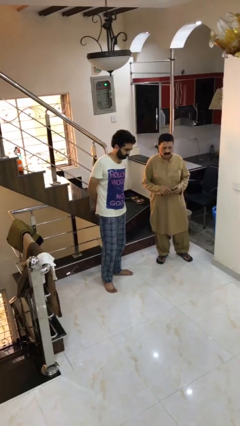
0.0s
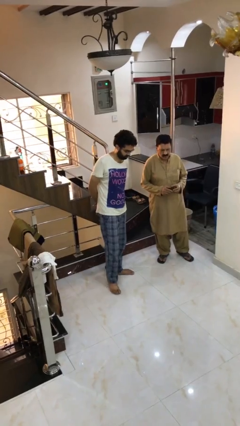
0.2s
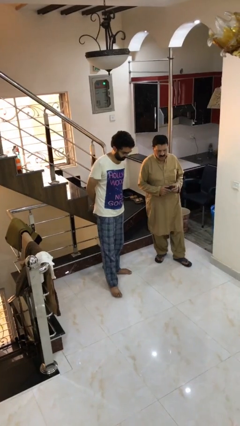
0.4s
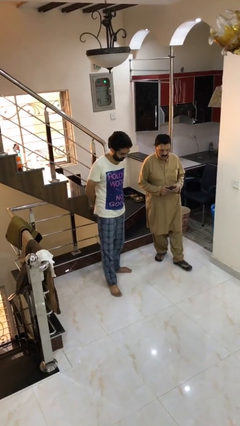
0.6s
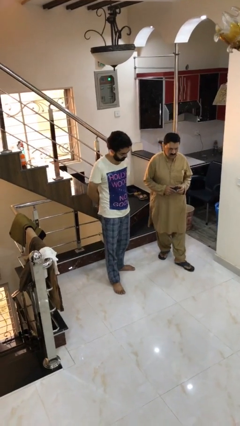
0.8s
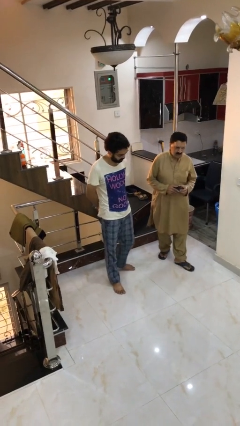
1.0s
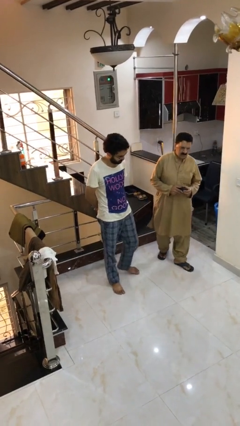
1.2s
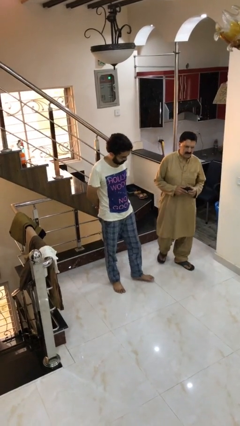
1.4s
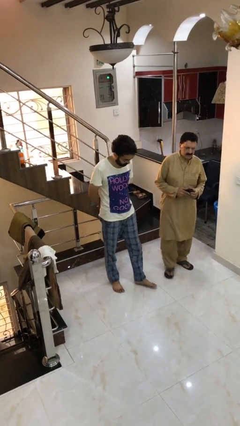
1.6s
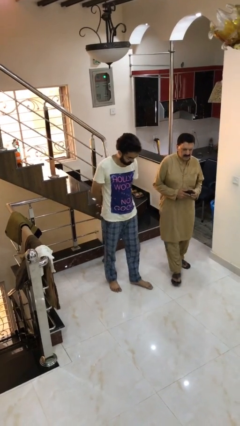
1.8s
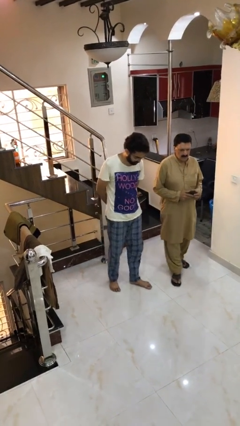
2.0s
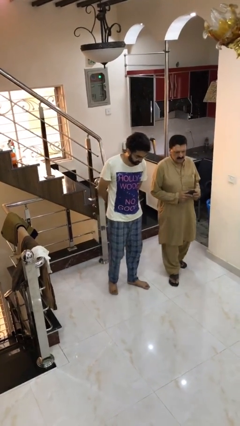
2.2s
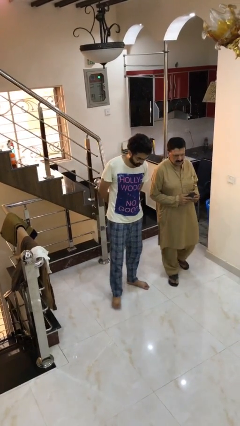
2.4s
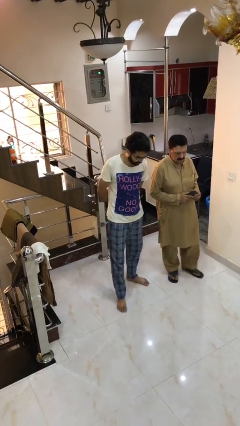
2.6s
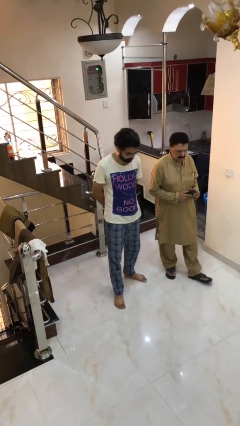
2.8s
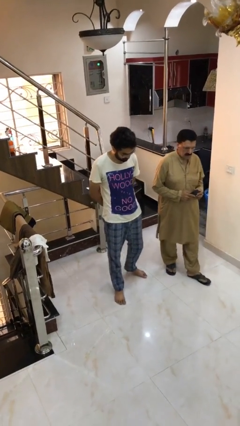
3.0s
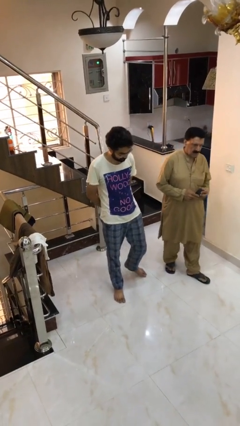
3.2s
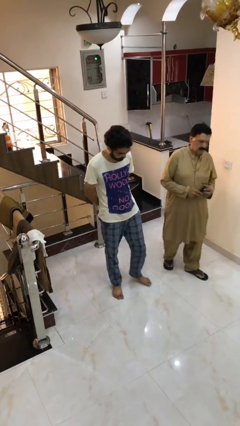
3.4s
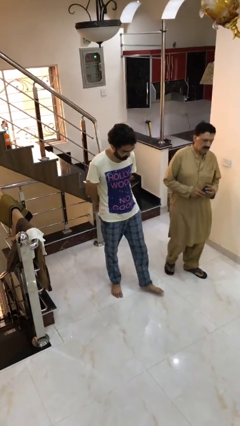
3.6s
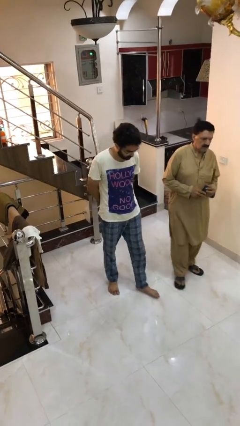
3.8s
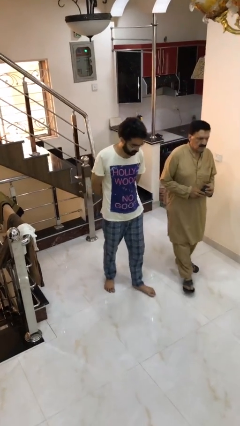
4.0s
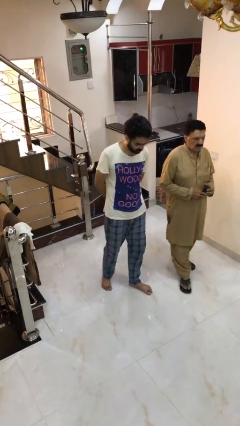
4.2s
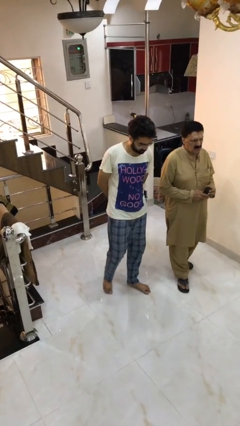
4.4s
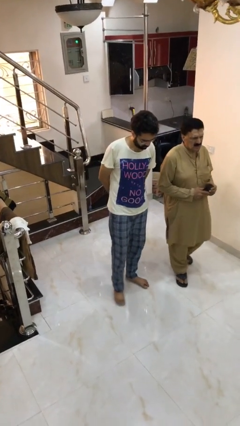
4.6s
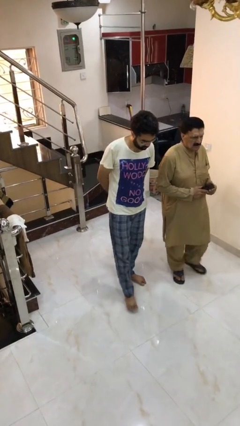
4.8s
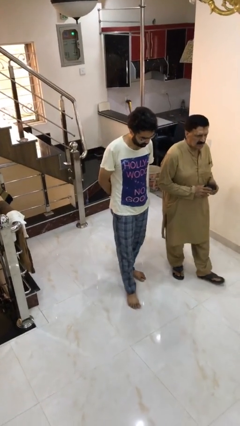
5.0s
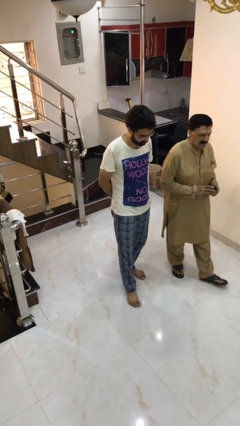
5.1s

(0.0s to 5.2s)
person talks to person

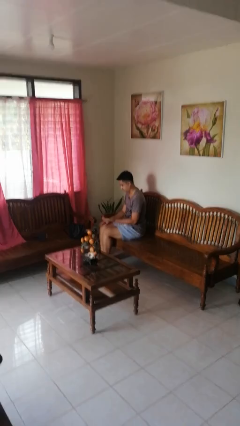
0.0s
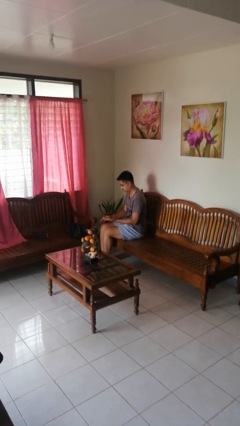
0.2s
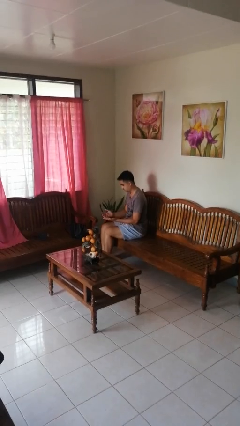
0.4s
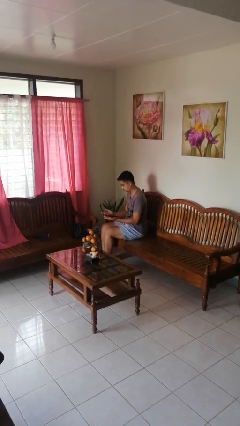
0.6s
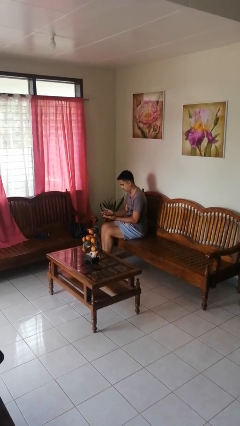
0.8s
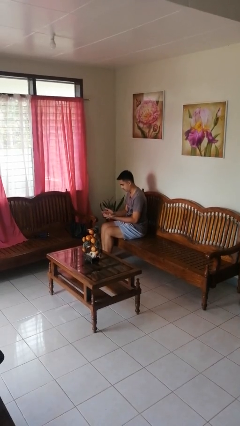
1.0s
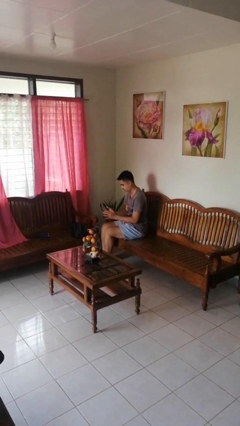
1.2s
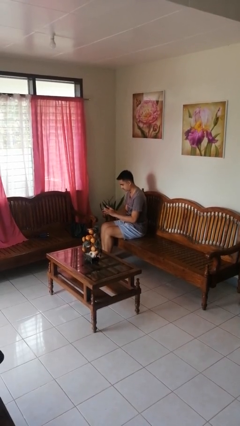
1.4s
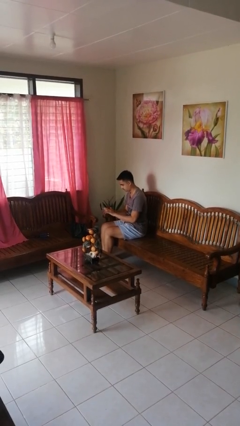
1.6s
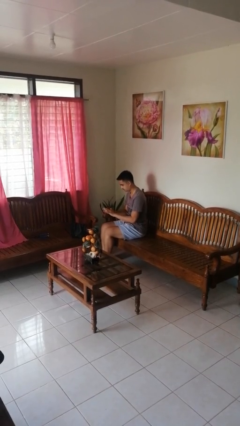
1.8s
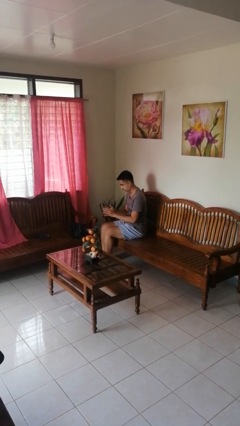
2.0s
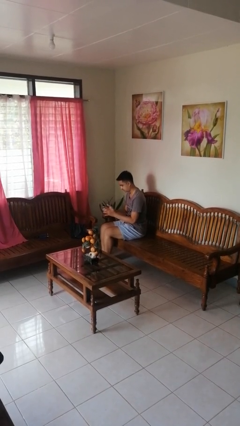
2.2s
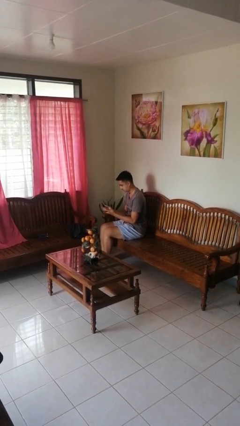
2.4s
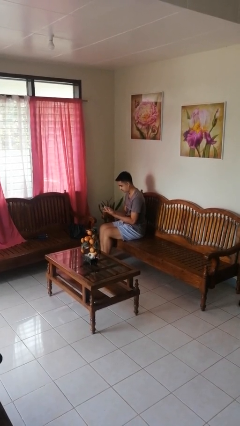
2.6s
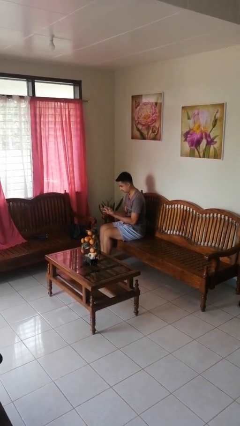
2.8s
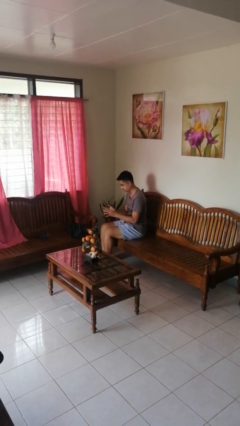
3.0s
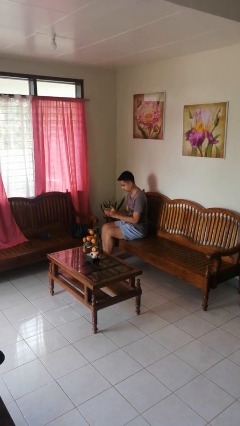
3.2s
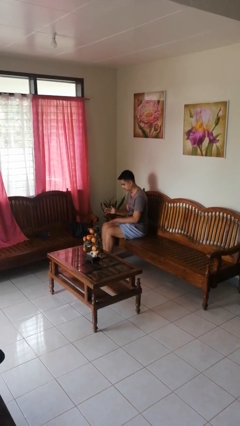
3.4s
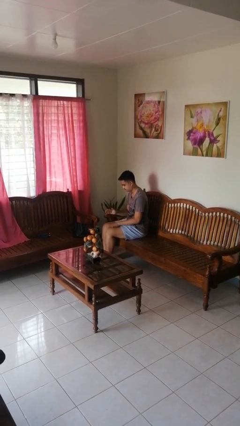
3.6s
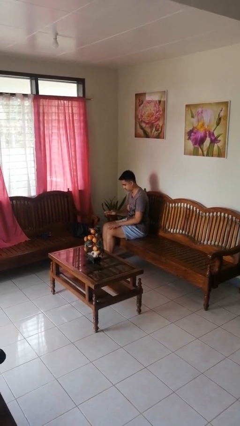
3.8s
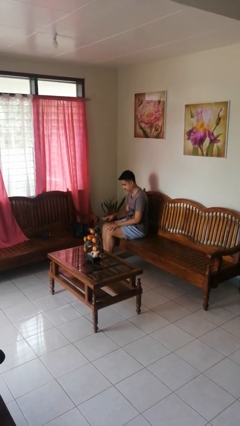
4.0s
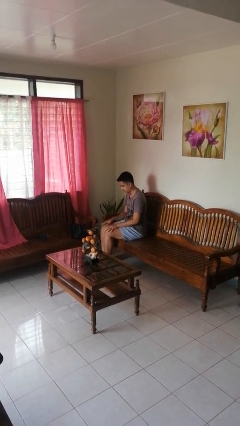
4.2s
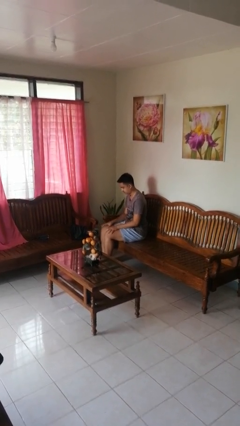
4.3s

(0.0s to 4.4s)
person looks at hands in lap

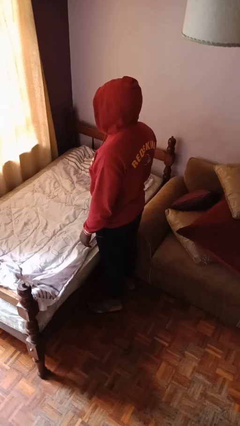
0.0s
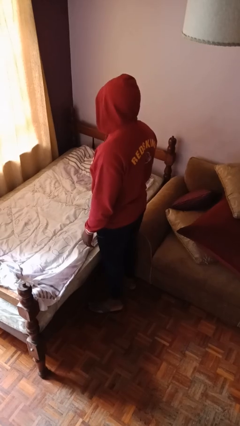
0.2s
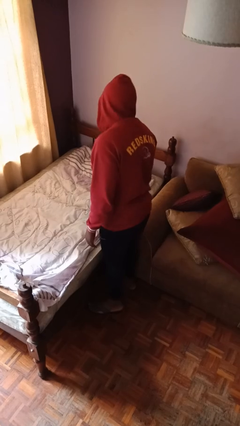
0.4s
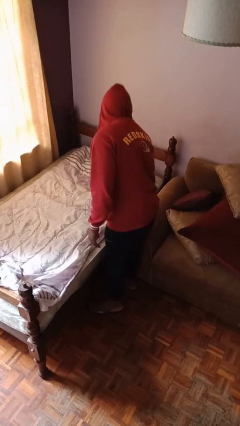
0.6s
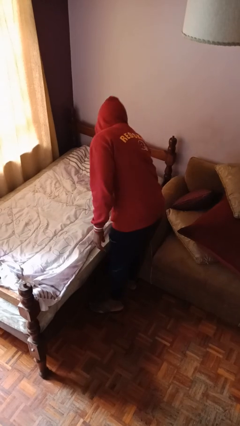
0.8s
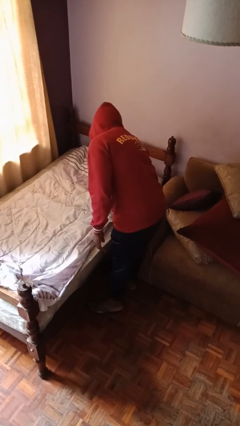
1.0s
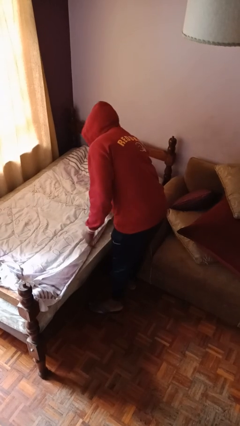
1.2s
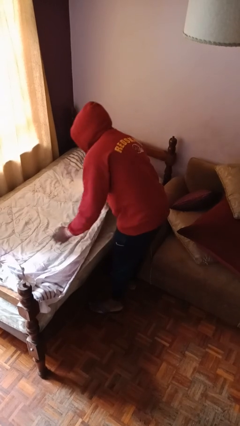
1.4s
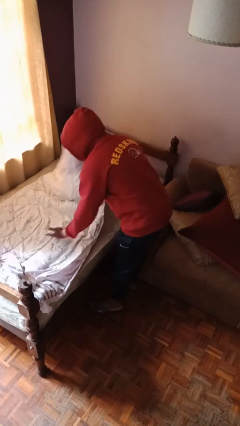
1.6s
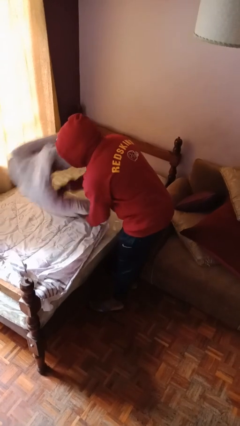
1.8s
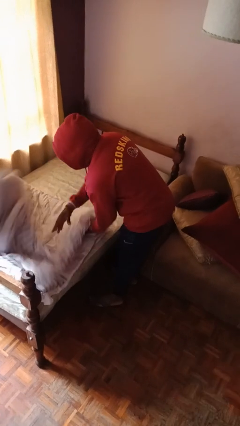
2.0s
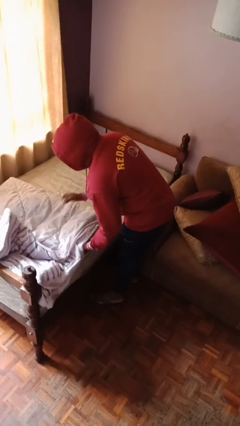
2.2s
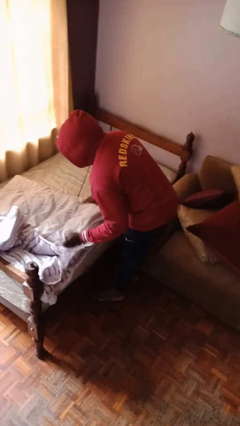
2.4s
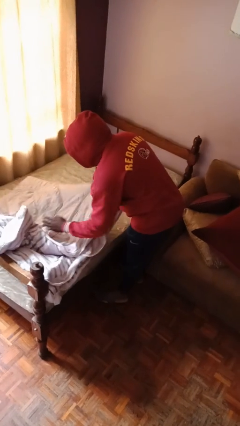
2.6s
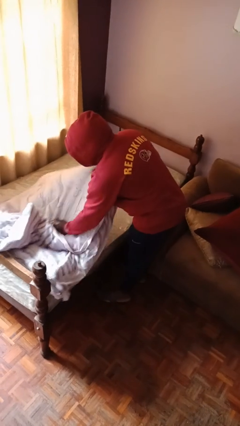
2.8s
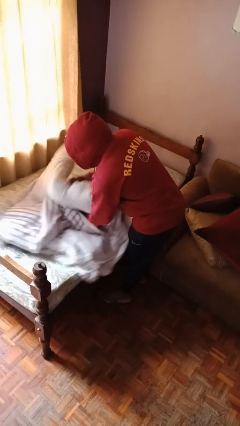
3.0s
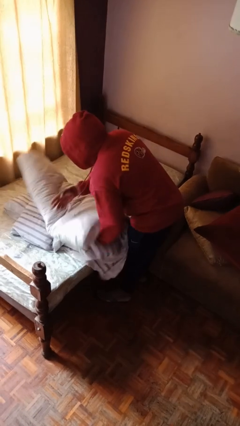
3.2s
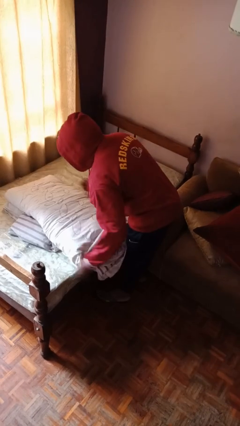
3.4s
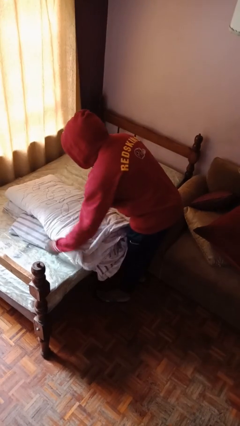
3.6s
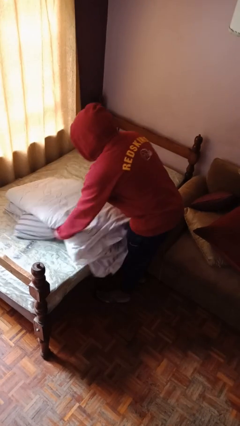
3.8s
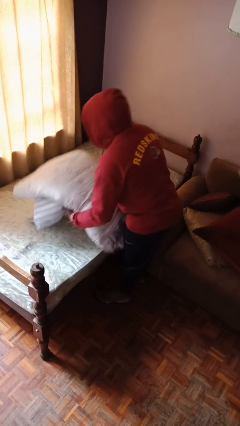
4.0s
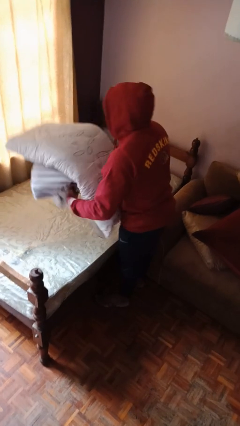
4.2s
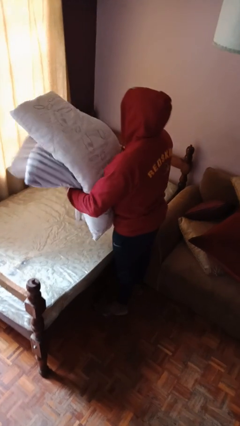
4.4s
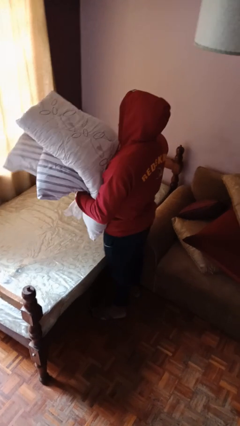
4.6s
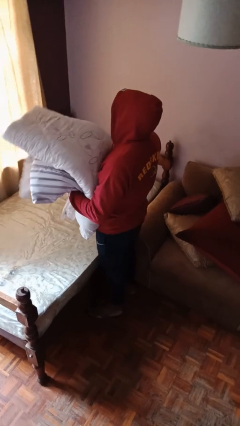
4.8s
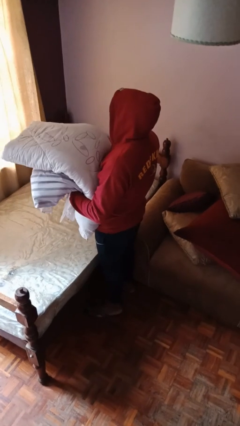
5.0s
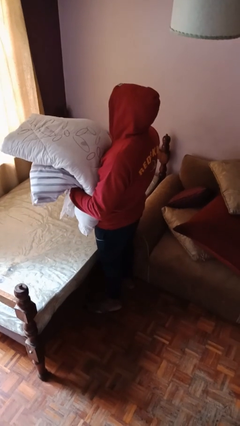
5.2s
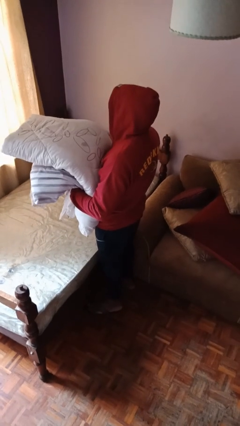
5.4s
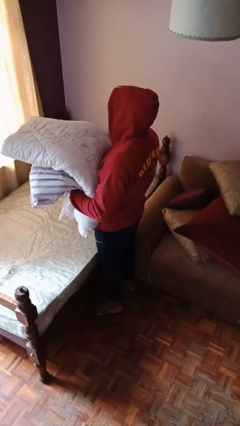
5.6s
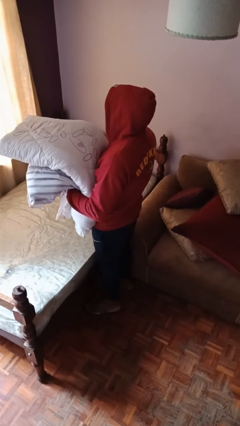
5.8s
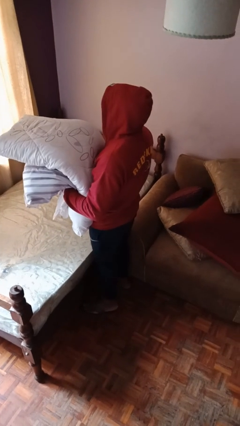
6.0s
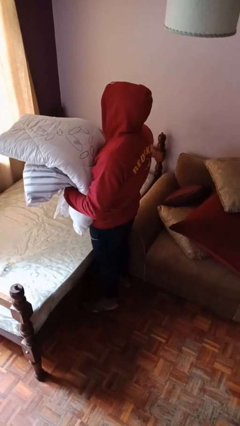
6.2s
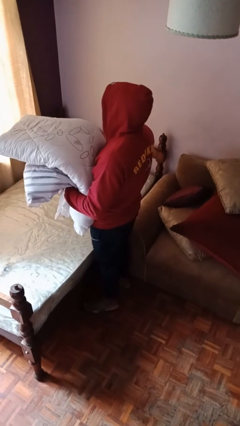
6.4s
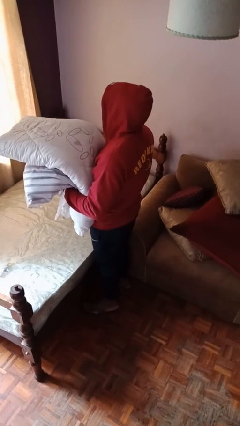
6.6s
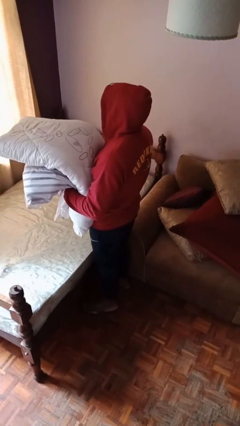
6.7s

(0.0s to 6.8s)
person folds blanket

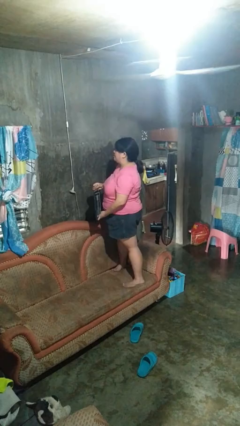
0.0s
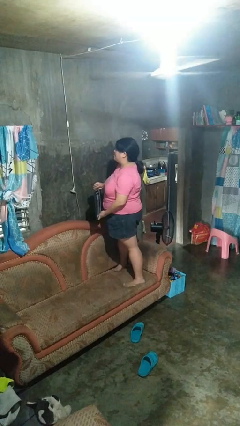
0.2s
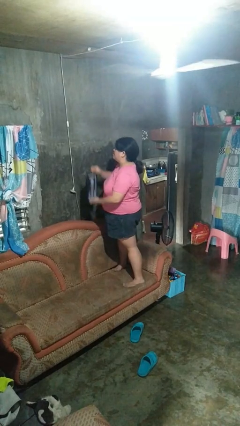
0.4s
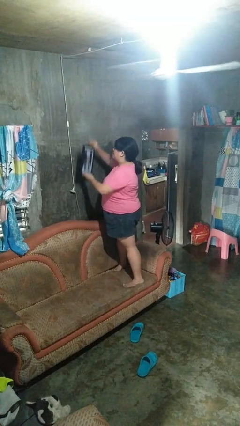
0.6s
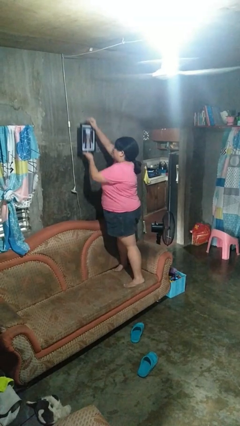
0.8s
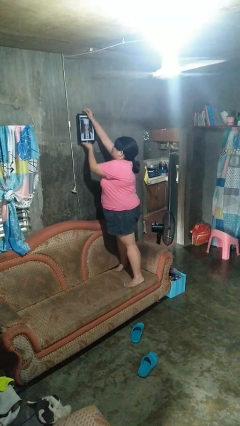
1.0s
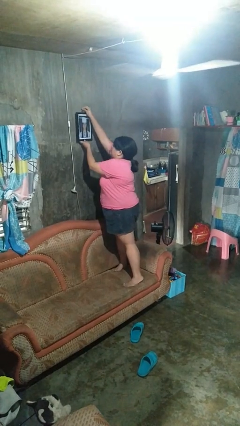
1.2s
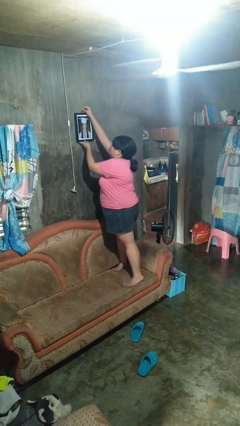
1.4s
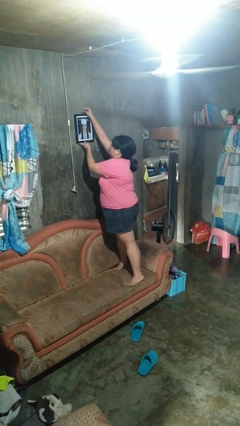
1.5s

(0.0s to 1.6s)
person puts up picture frame

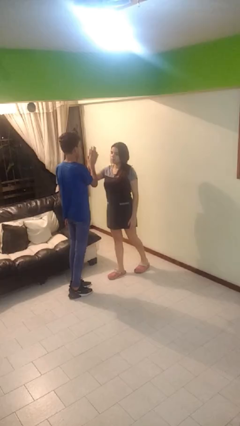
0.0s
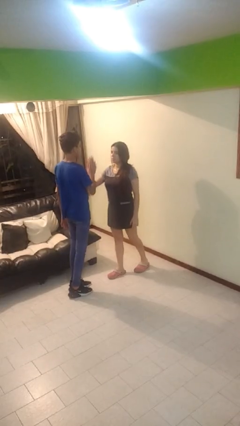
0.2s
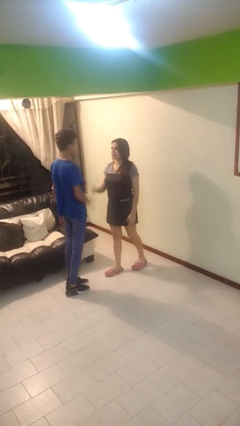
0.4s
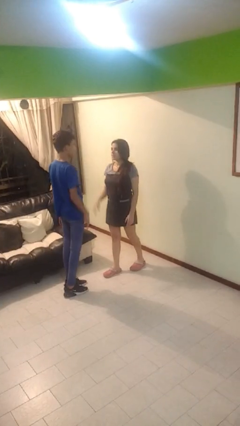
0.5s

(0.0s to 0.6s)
person highfives hand
